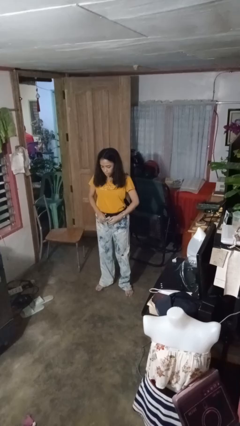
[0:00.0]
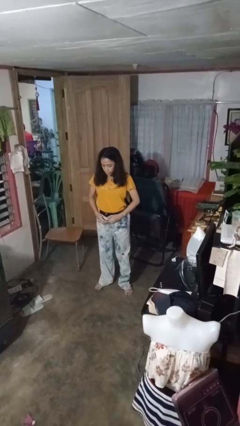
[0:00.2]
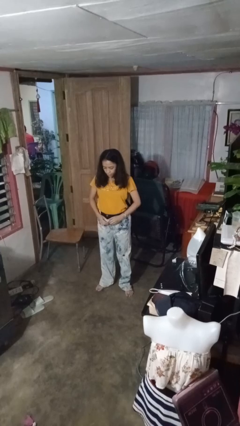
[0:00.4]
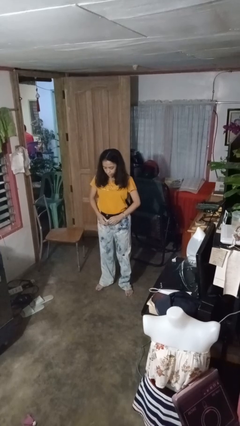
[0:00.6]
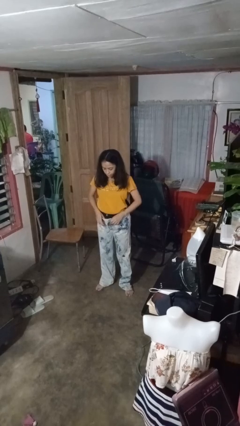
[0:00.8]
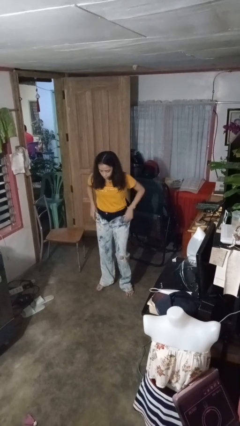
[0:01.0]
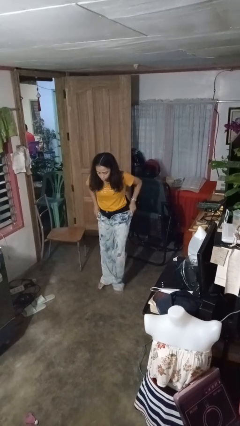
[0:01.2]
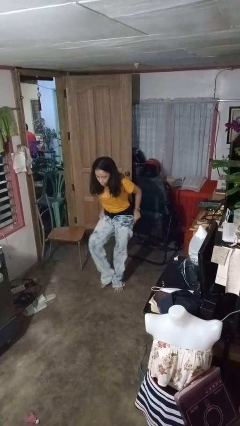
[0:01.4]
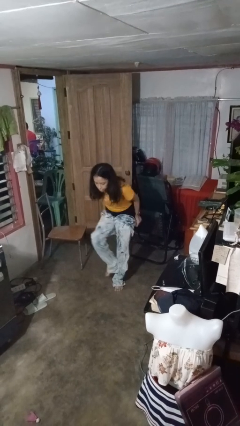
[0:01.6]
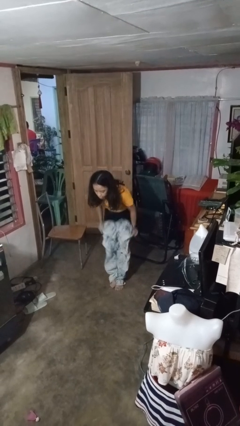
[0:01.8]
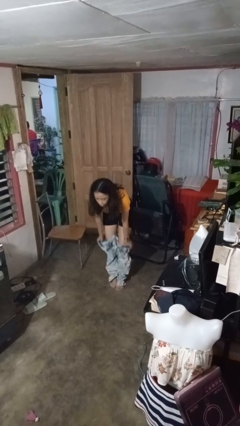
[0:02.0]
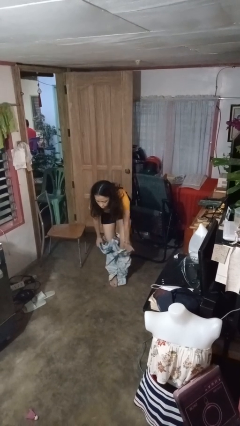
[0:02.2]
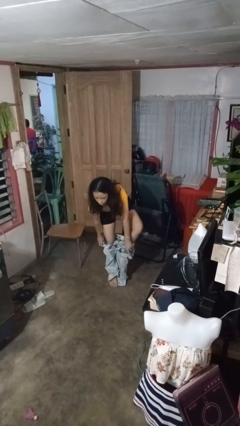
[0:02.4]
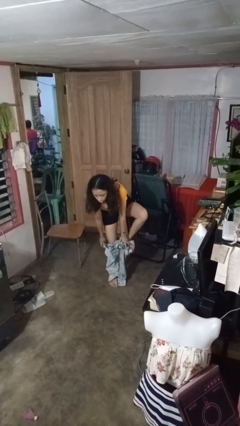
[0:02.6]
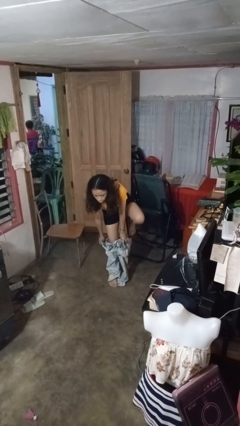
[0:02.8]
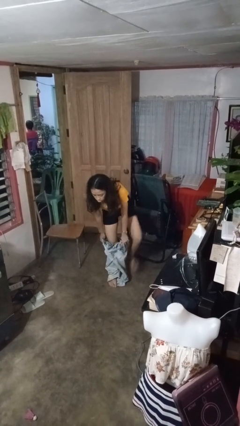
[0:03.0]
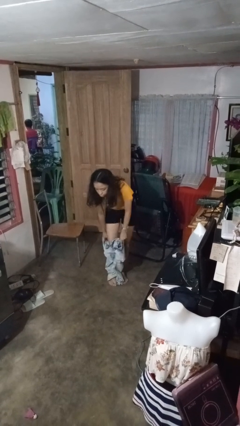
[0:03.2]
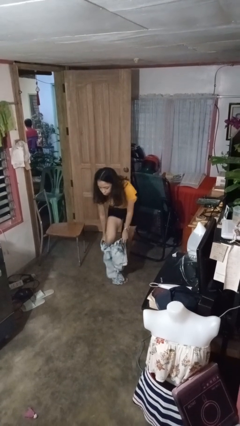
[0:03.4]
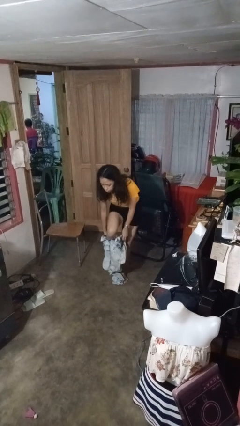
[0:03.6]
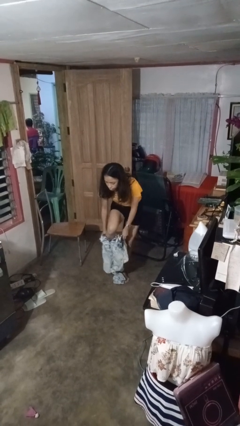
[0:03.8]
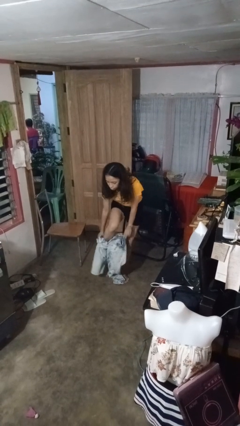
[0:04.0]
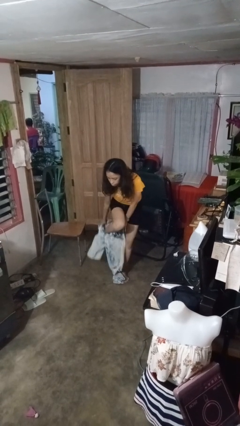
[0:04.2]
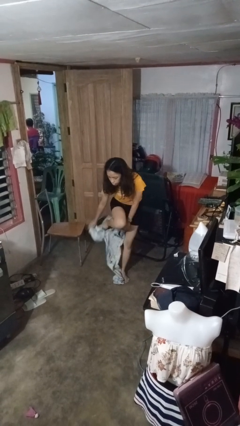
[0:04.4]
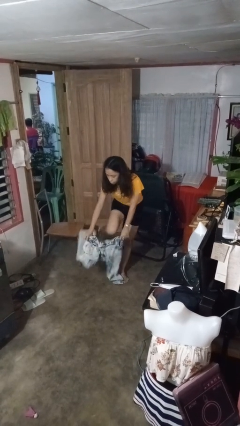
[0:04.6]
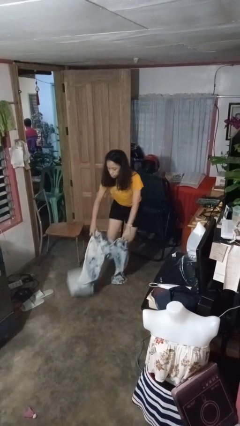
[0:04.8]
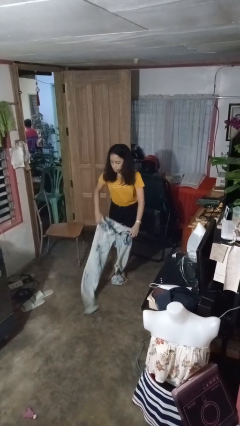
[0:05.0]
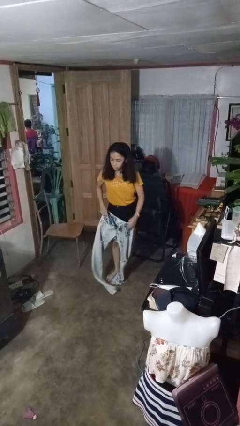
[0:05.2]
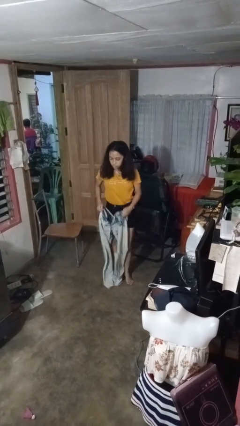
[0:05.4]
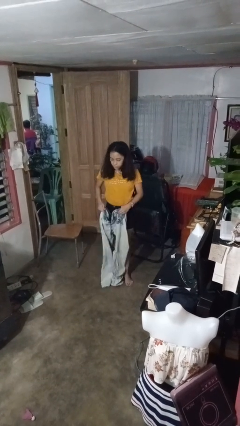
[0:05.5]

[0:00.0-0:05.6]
person takes off pants

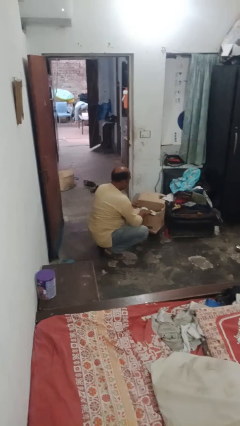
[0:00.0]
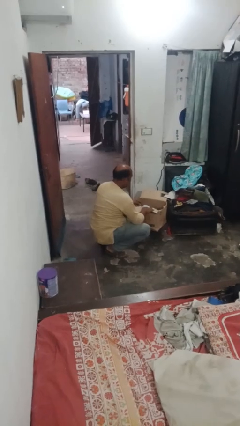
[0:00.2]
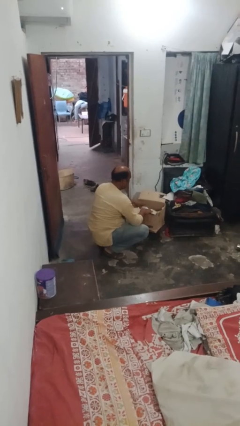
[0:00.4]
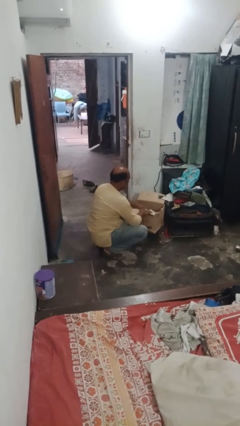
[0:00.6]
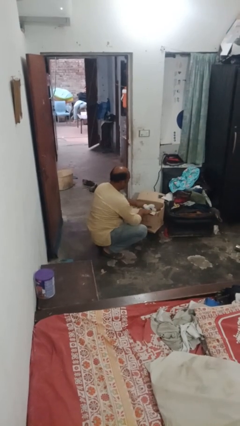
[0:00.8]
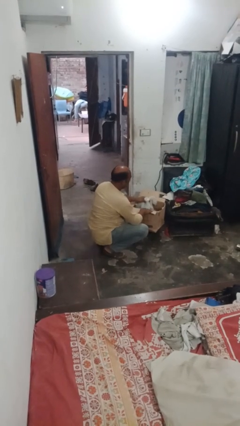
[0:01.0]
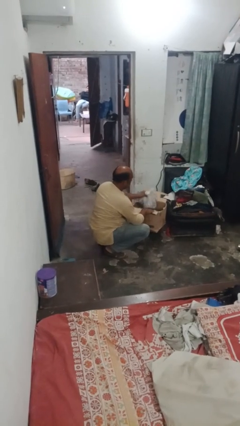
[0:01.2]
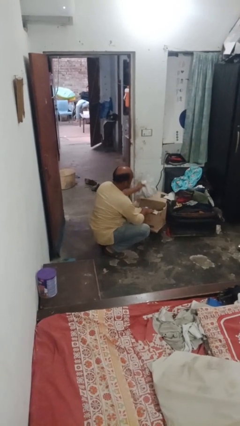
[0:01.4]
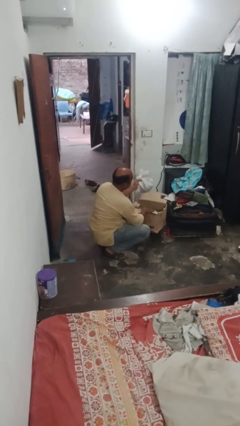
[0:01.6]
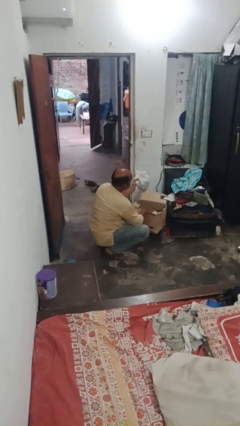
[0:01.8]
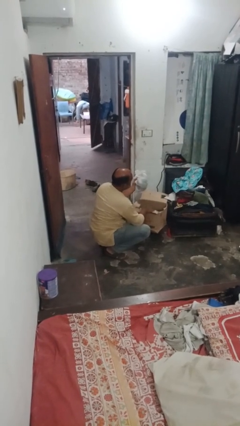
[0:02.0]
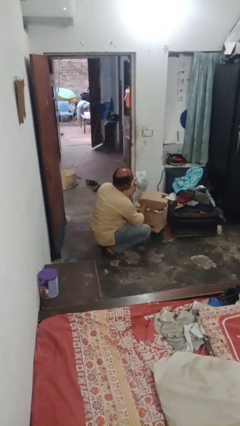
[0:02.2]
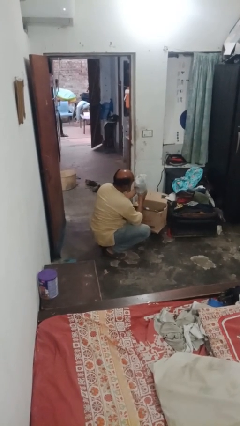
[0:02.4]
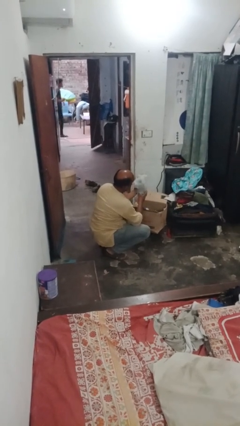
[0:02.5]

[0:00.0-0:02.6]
person takes object from box

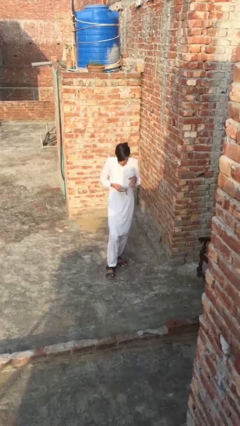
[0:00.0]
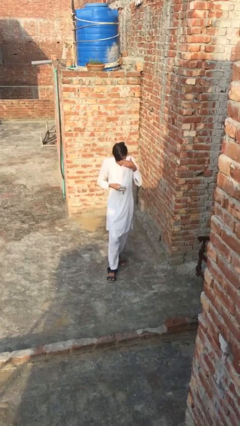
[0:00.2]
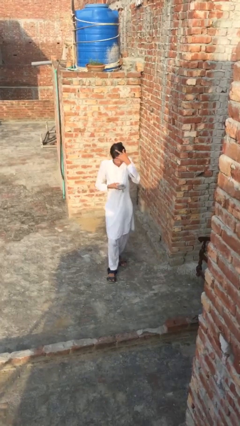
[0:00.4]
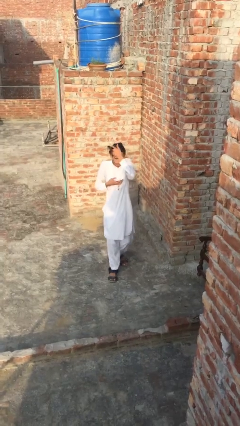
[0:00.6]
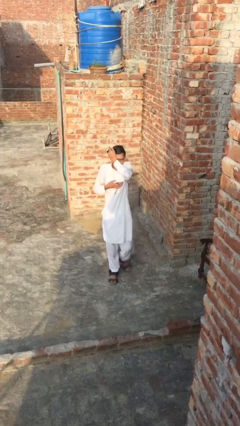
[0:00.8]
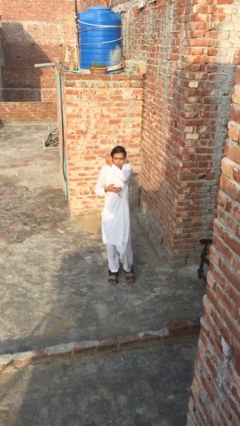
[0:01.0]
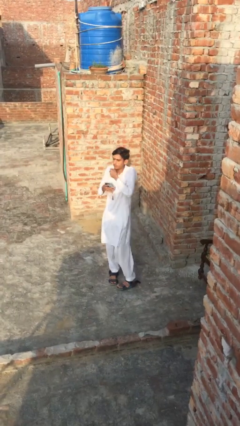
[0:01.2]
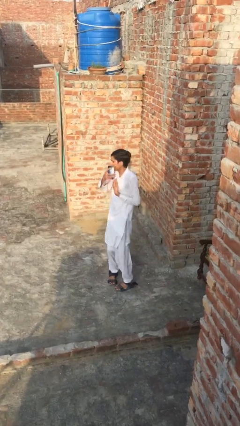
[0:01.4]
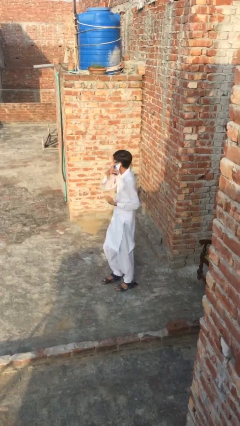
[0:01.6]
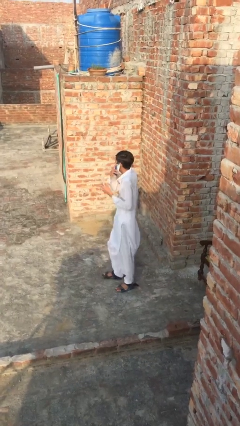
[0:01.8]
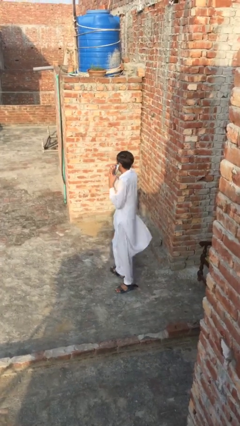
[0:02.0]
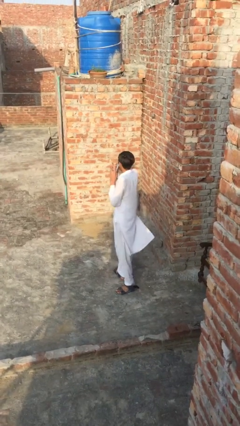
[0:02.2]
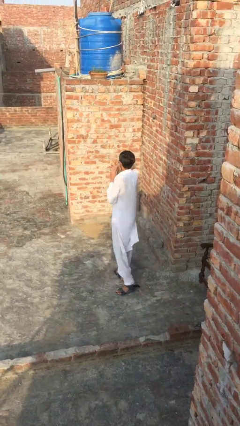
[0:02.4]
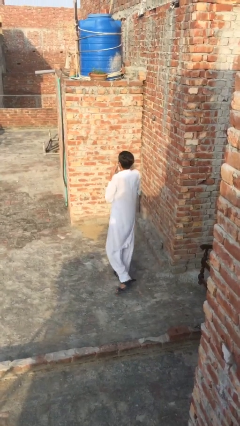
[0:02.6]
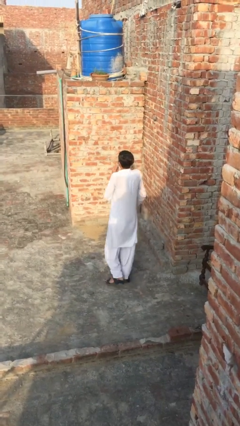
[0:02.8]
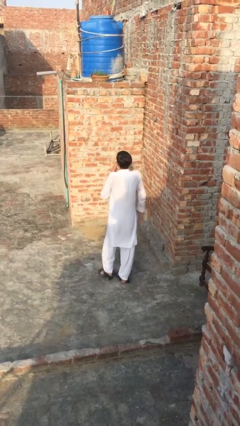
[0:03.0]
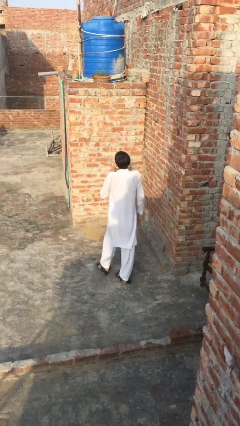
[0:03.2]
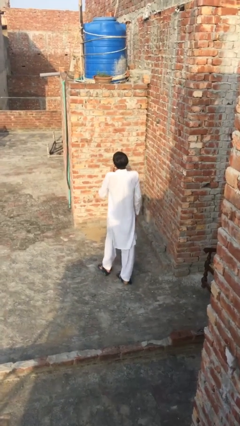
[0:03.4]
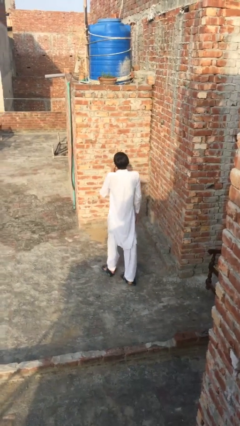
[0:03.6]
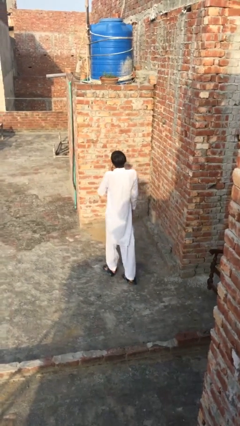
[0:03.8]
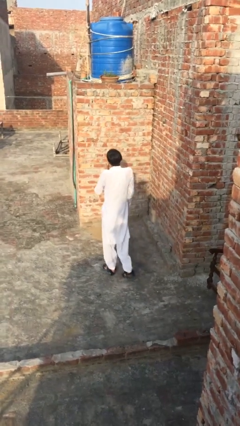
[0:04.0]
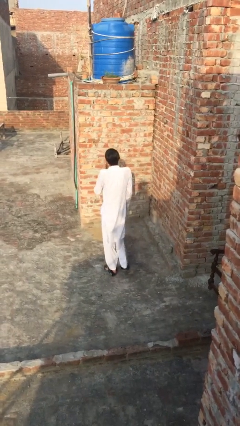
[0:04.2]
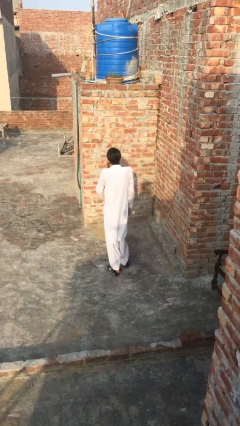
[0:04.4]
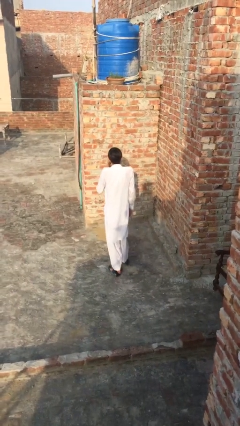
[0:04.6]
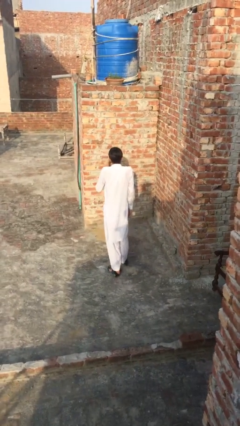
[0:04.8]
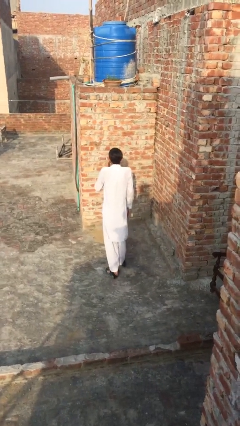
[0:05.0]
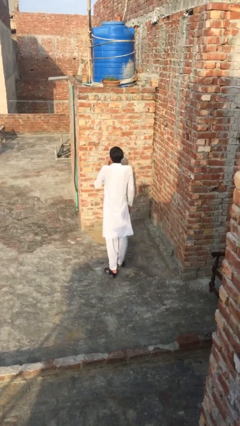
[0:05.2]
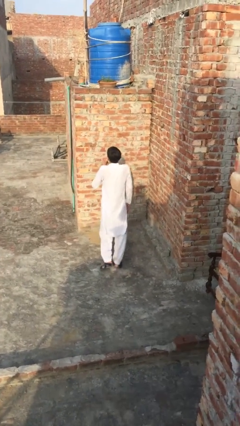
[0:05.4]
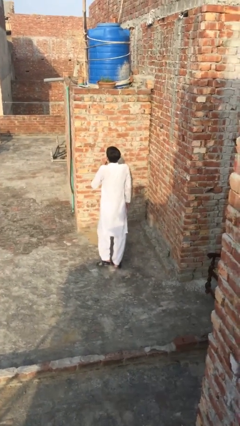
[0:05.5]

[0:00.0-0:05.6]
person talks on phone

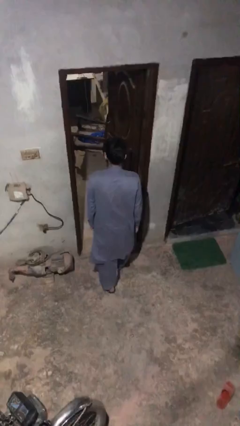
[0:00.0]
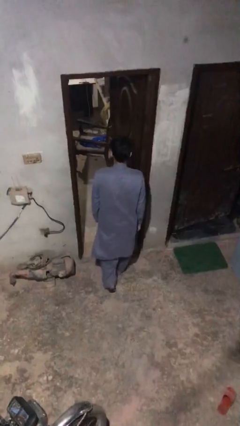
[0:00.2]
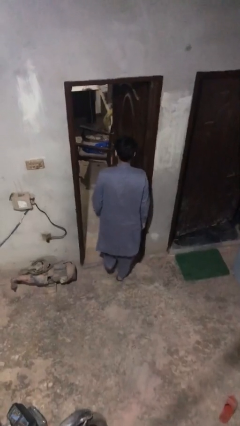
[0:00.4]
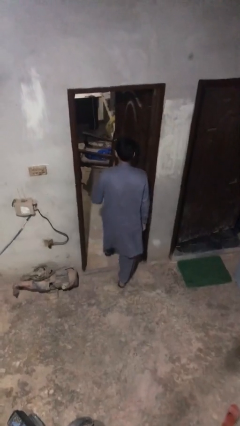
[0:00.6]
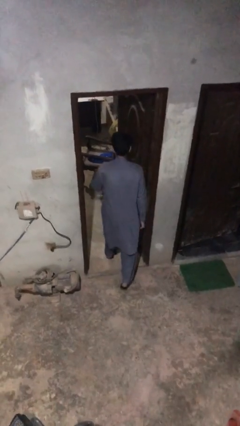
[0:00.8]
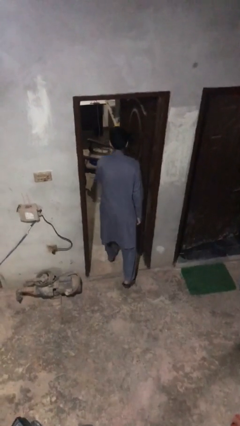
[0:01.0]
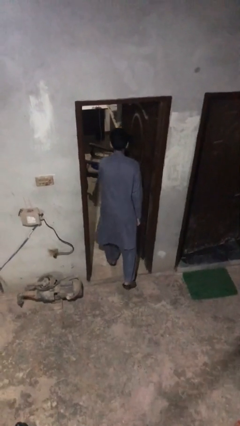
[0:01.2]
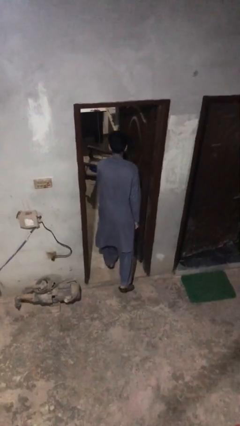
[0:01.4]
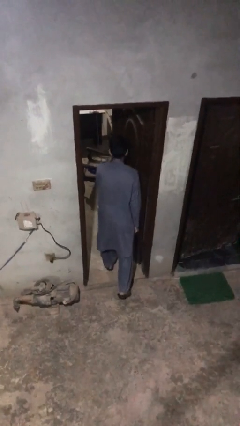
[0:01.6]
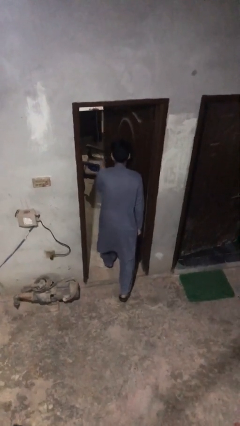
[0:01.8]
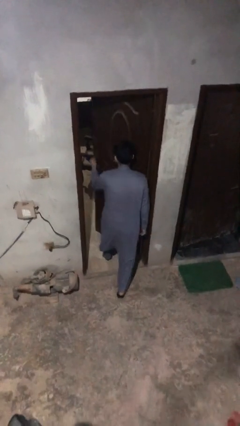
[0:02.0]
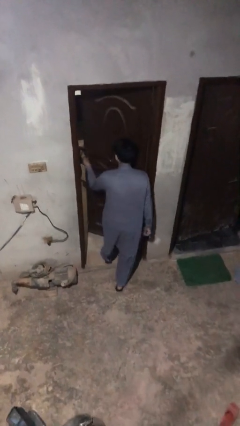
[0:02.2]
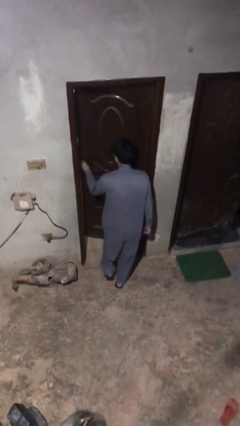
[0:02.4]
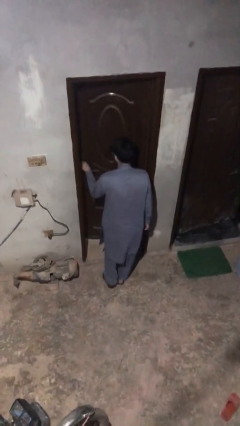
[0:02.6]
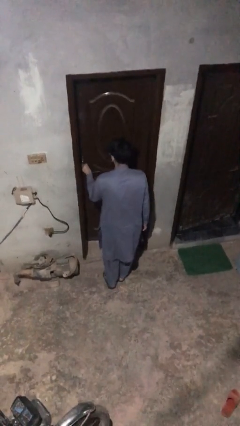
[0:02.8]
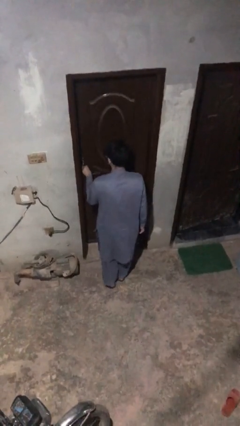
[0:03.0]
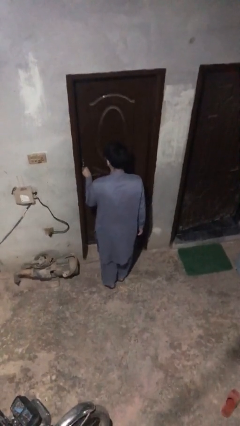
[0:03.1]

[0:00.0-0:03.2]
person closes facility door

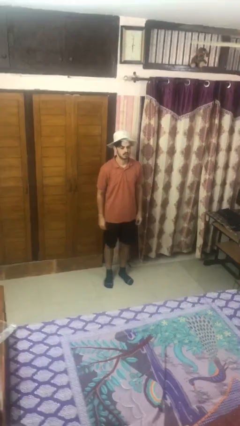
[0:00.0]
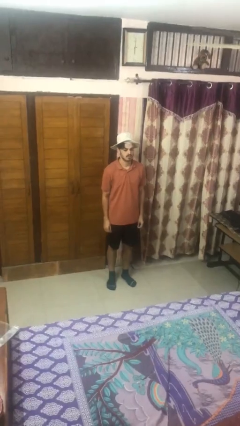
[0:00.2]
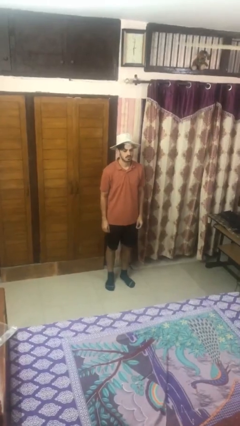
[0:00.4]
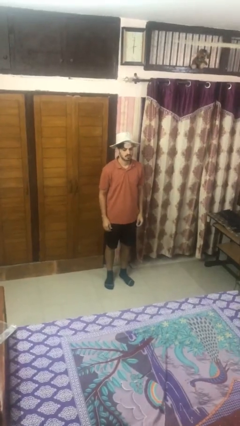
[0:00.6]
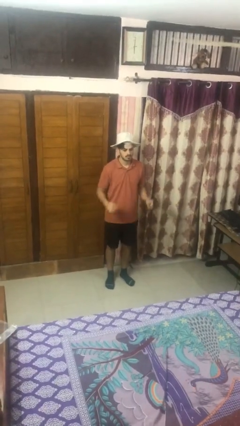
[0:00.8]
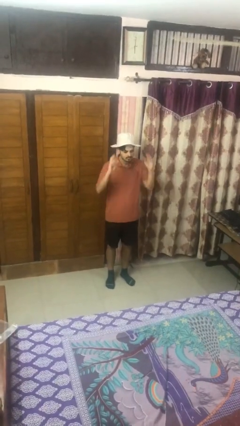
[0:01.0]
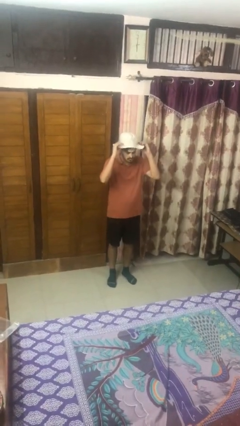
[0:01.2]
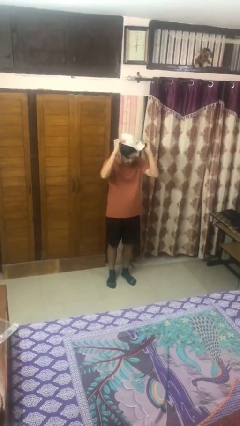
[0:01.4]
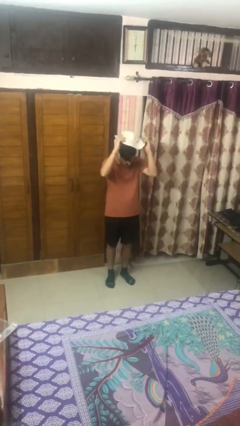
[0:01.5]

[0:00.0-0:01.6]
person takes off hat
